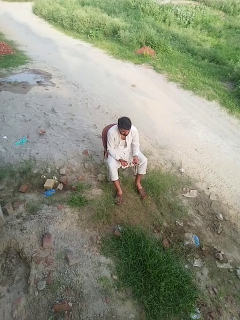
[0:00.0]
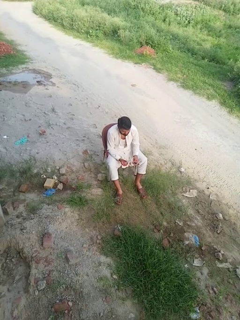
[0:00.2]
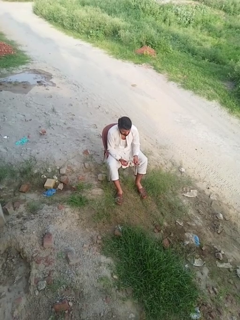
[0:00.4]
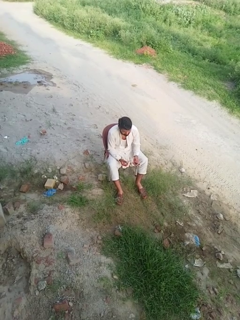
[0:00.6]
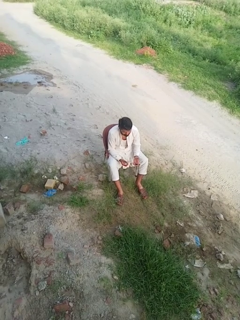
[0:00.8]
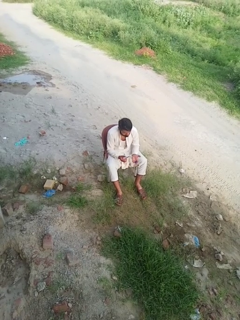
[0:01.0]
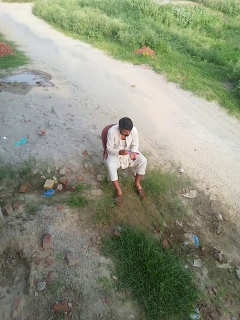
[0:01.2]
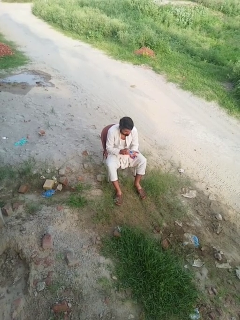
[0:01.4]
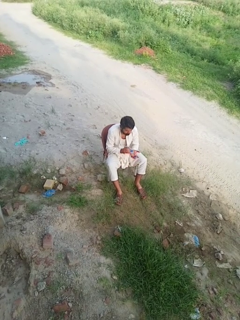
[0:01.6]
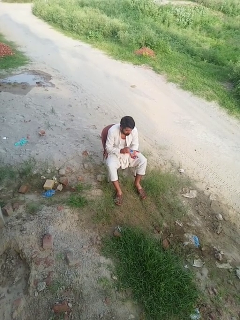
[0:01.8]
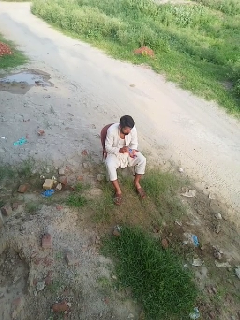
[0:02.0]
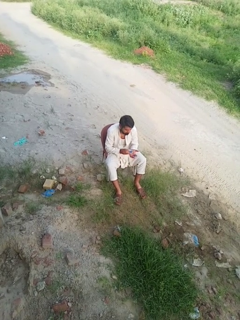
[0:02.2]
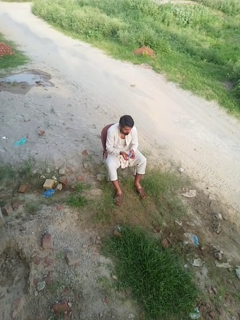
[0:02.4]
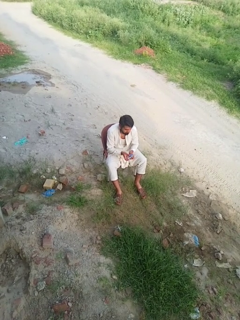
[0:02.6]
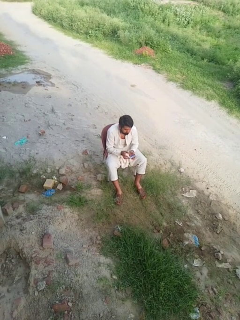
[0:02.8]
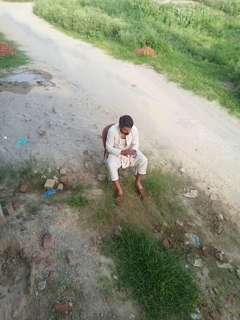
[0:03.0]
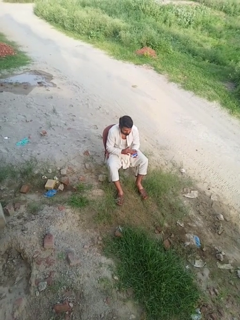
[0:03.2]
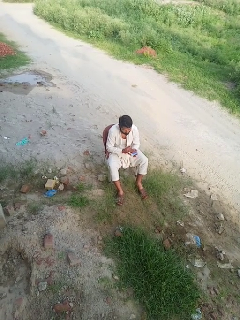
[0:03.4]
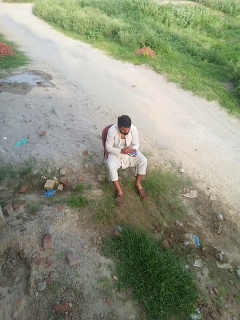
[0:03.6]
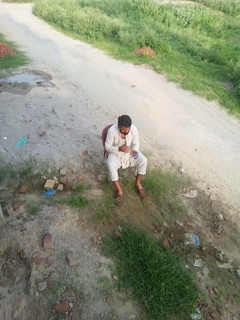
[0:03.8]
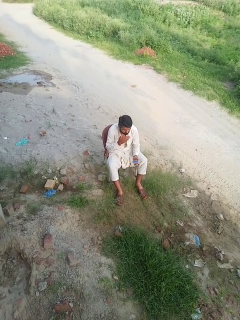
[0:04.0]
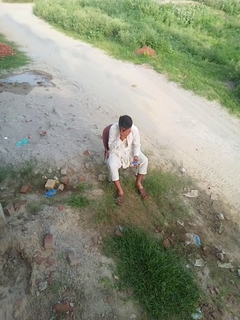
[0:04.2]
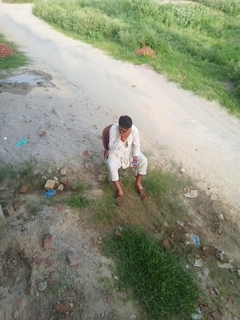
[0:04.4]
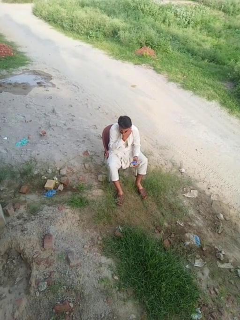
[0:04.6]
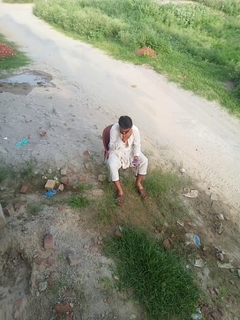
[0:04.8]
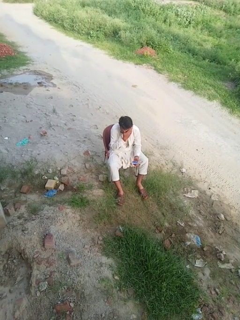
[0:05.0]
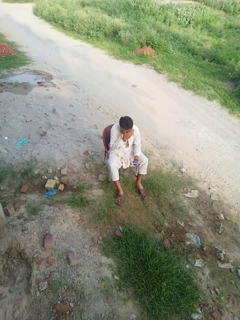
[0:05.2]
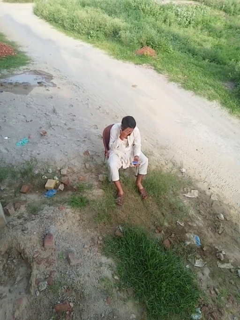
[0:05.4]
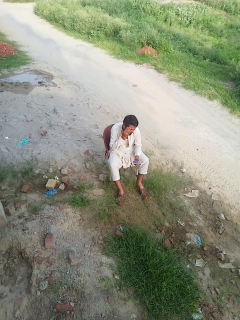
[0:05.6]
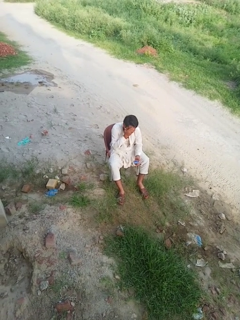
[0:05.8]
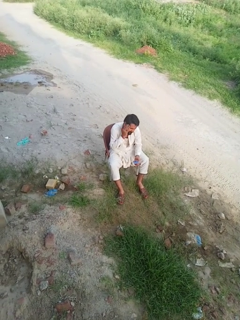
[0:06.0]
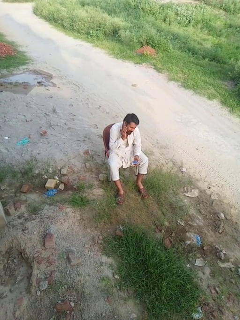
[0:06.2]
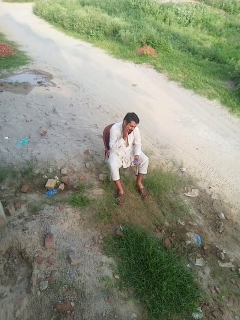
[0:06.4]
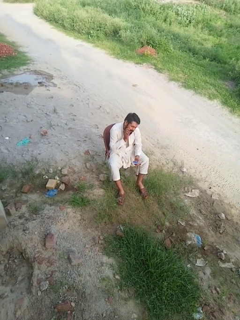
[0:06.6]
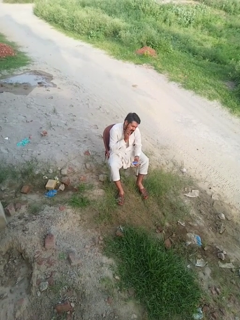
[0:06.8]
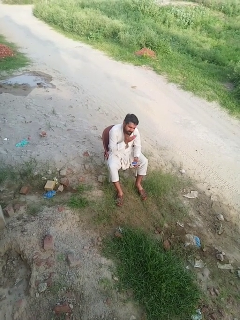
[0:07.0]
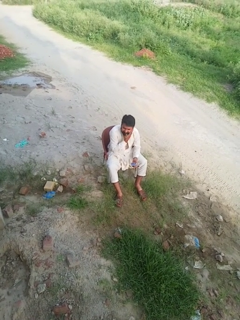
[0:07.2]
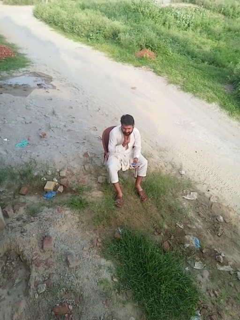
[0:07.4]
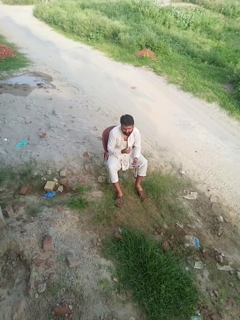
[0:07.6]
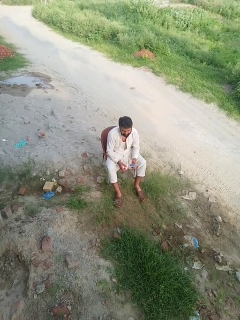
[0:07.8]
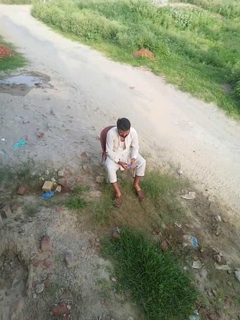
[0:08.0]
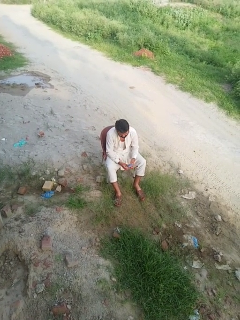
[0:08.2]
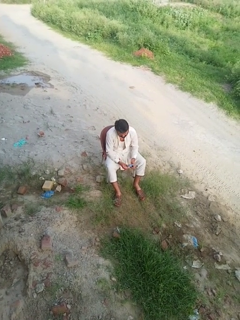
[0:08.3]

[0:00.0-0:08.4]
person applies facial moisturizer

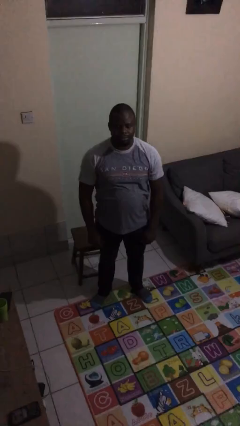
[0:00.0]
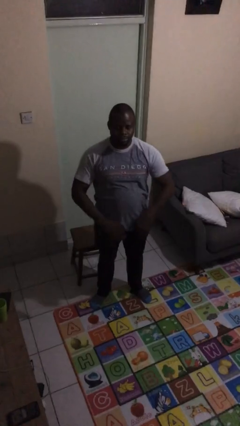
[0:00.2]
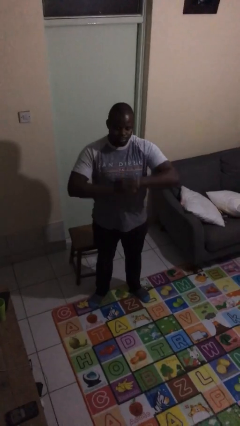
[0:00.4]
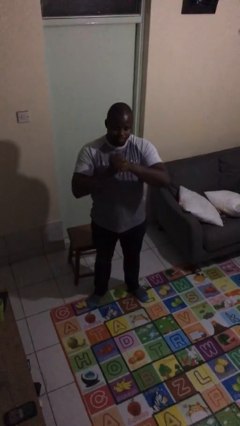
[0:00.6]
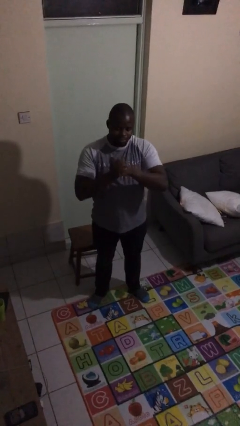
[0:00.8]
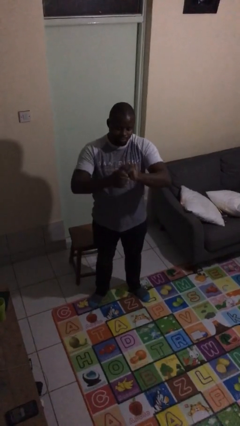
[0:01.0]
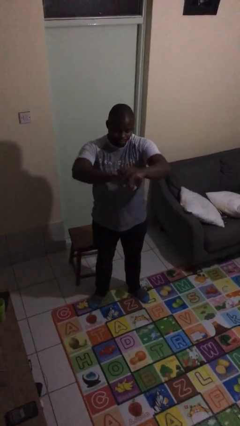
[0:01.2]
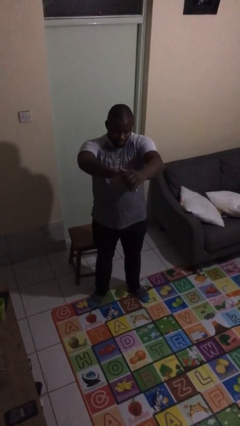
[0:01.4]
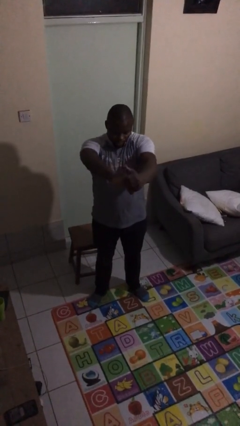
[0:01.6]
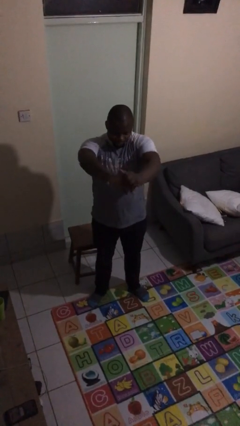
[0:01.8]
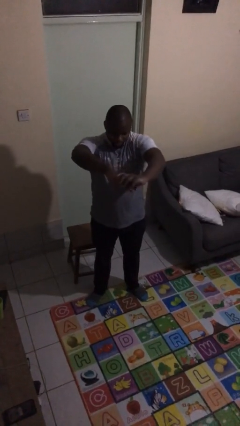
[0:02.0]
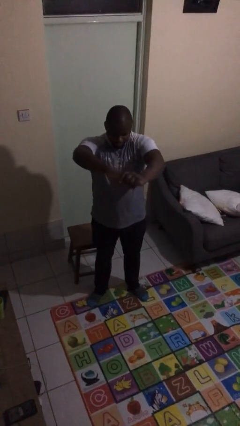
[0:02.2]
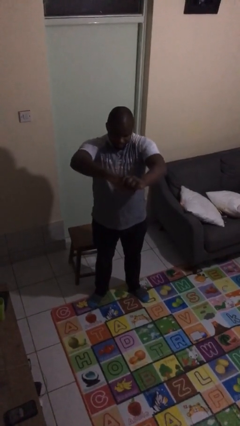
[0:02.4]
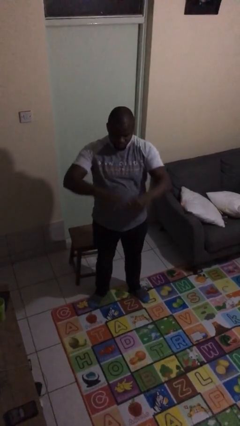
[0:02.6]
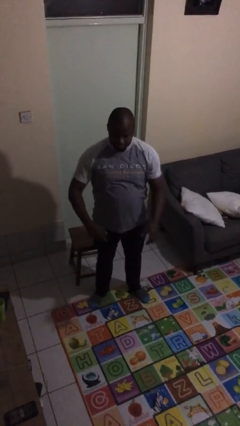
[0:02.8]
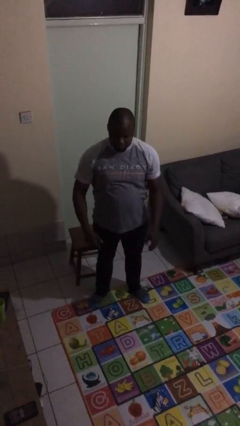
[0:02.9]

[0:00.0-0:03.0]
person cracks knuckles

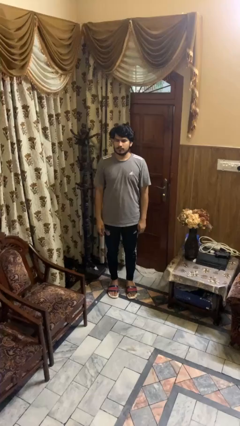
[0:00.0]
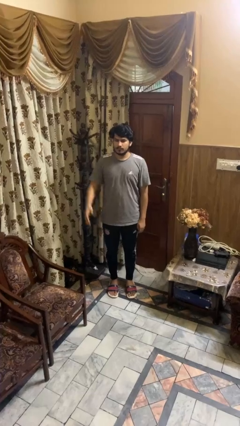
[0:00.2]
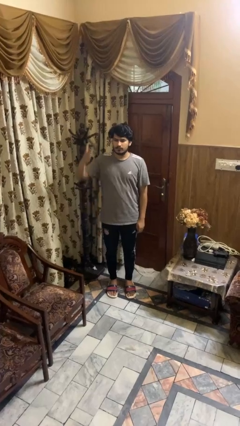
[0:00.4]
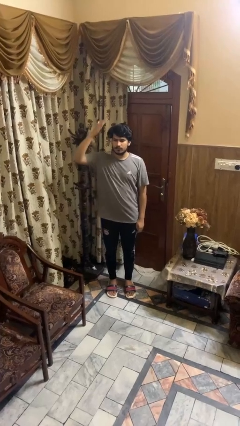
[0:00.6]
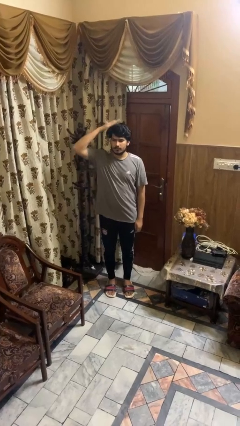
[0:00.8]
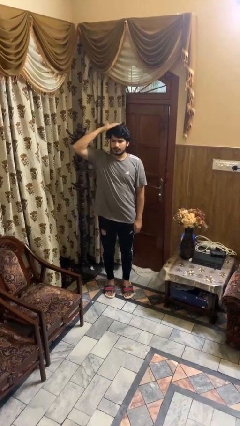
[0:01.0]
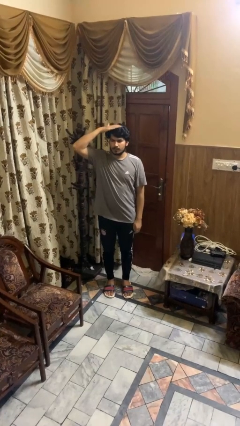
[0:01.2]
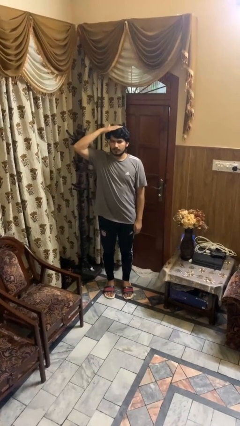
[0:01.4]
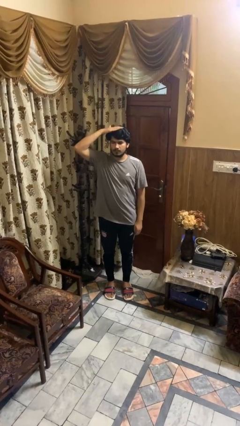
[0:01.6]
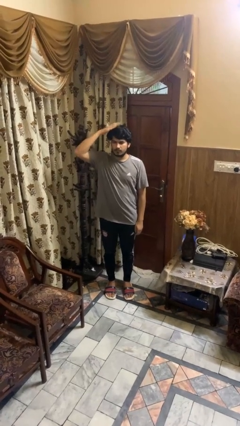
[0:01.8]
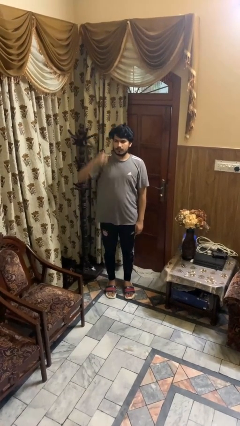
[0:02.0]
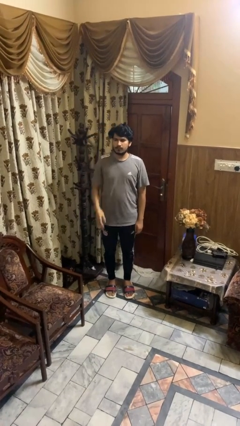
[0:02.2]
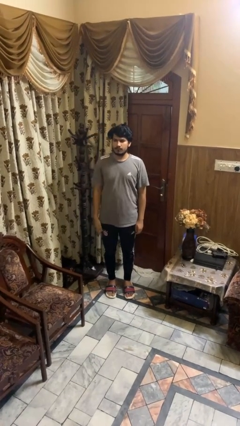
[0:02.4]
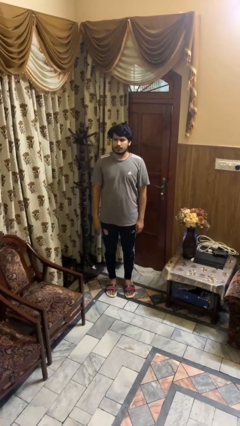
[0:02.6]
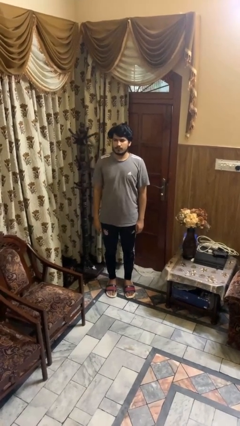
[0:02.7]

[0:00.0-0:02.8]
person pats head

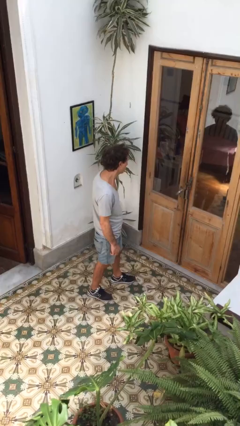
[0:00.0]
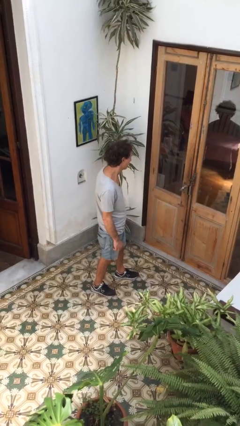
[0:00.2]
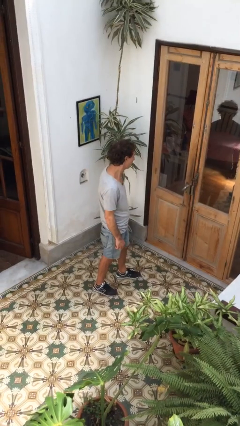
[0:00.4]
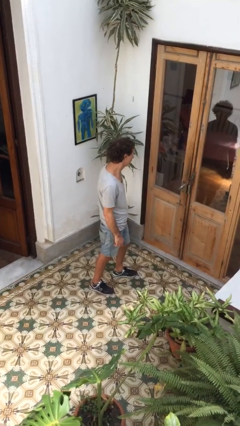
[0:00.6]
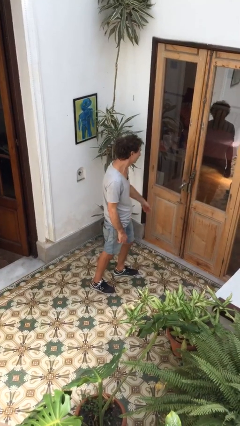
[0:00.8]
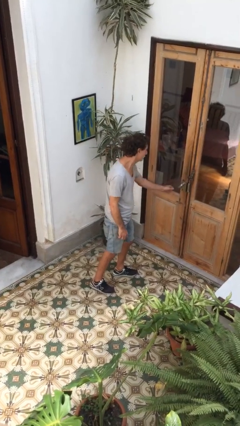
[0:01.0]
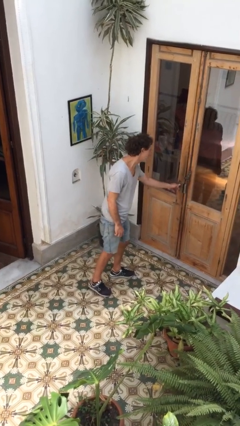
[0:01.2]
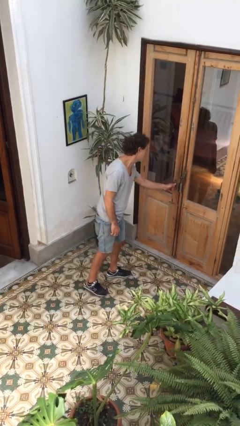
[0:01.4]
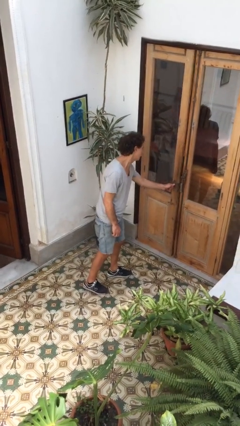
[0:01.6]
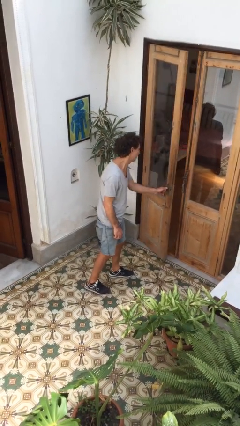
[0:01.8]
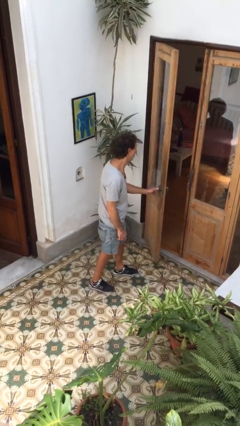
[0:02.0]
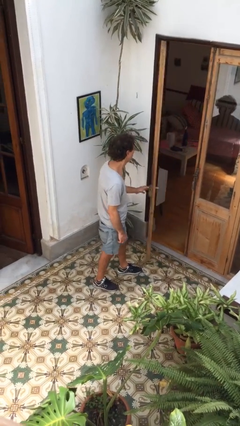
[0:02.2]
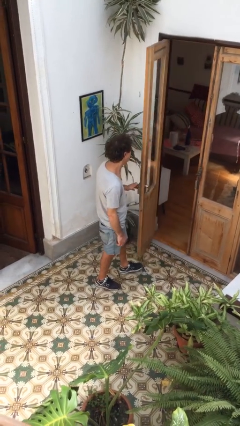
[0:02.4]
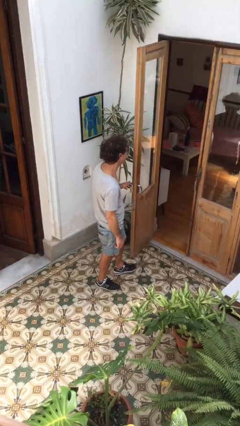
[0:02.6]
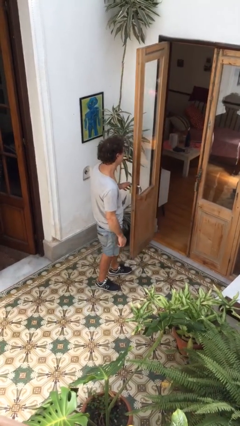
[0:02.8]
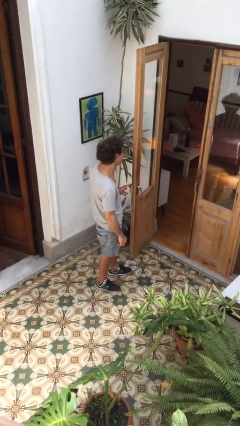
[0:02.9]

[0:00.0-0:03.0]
person opens facility door

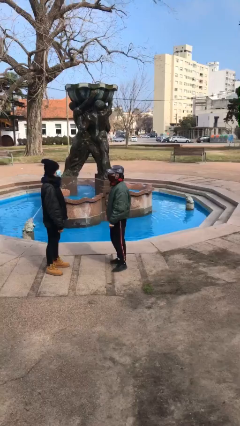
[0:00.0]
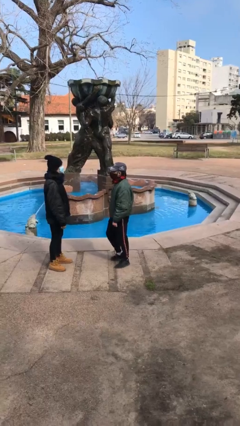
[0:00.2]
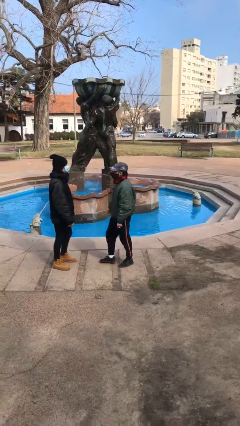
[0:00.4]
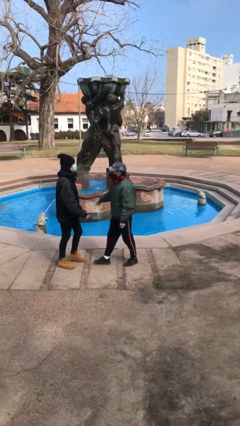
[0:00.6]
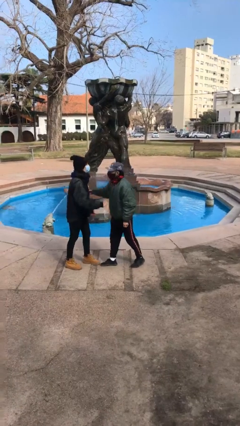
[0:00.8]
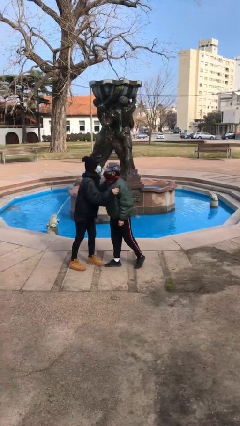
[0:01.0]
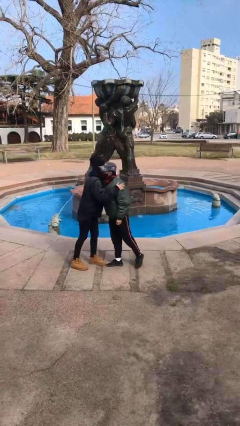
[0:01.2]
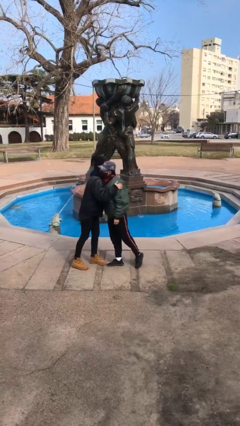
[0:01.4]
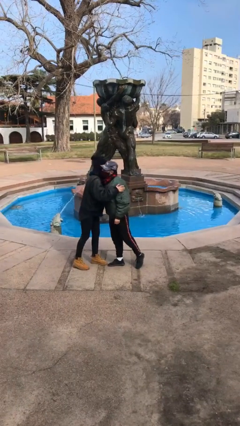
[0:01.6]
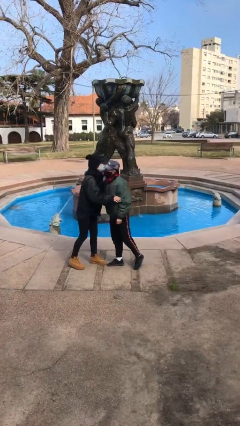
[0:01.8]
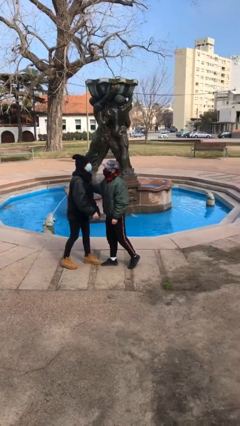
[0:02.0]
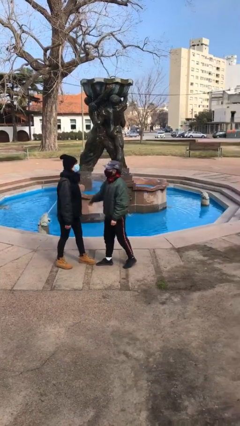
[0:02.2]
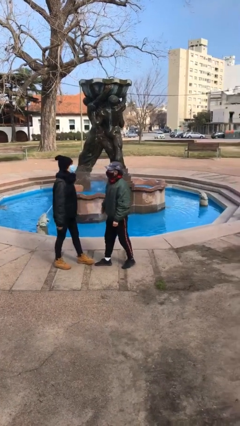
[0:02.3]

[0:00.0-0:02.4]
person kisses cheek of person
